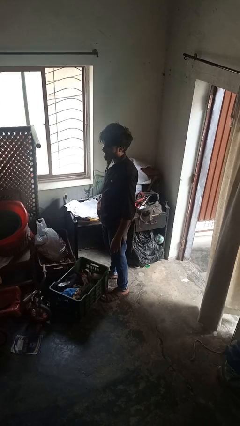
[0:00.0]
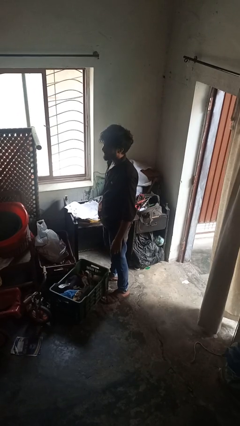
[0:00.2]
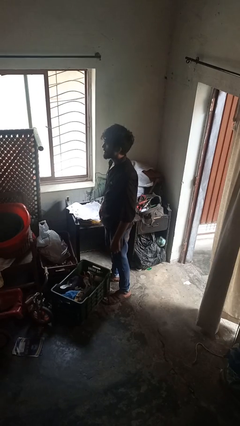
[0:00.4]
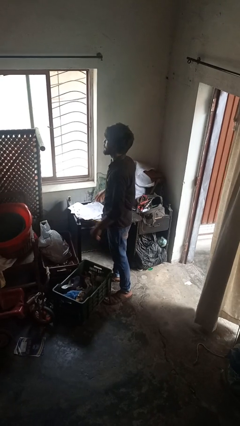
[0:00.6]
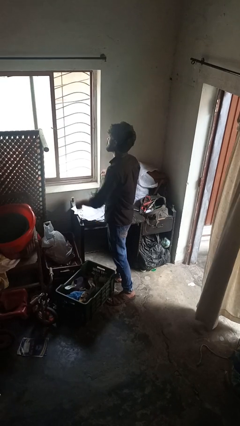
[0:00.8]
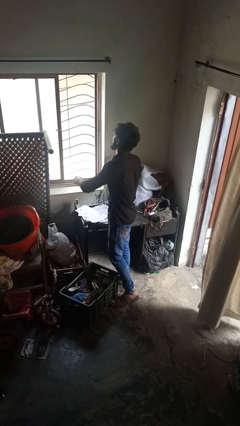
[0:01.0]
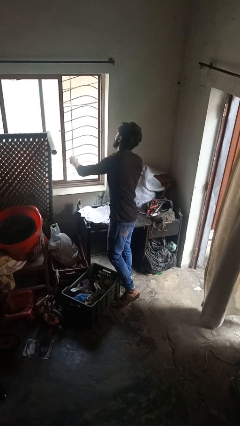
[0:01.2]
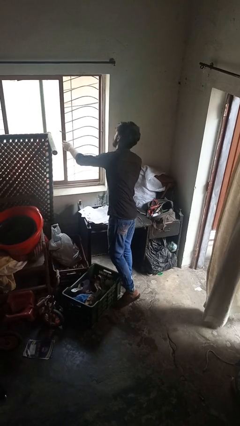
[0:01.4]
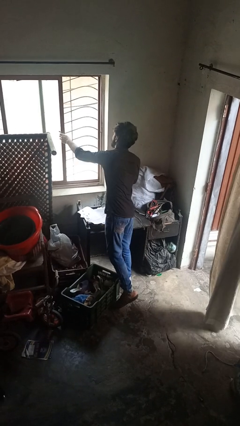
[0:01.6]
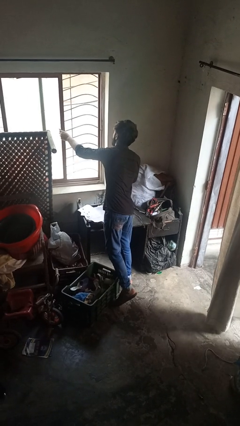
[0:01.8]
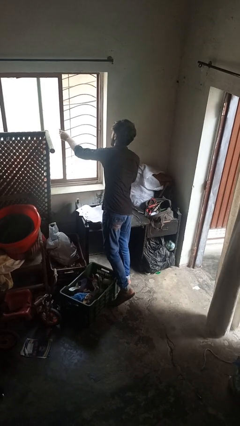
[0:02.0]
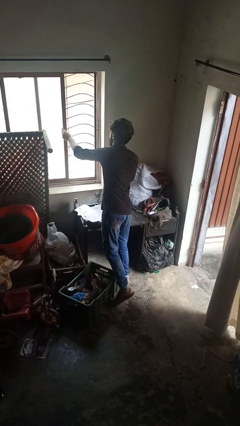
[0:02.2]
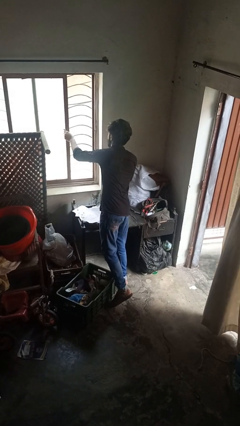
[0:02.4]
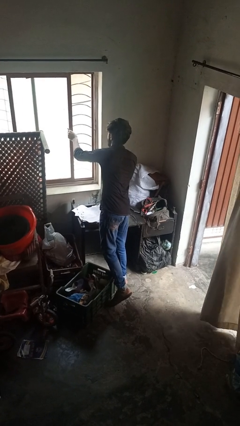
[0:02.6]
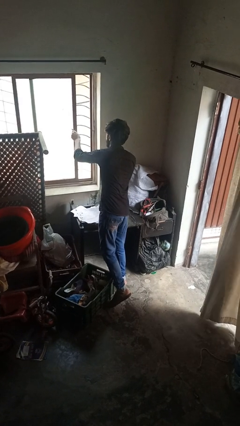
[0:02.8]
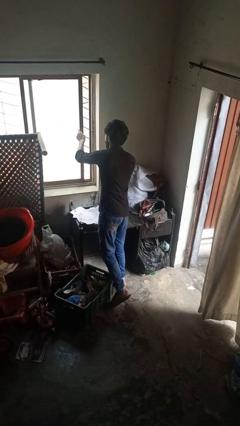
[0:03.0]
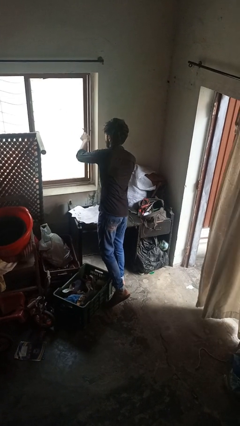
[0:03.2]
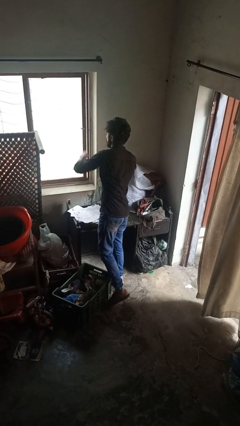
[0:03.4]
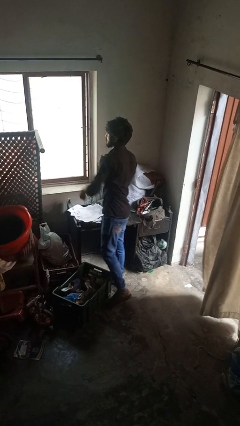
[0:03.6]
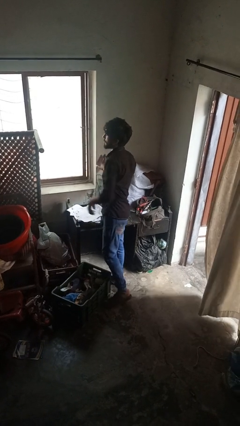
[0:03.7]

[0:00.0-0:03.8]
person closes home window

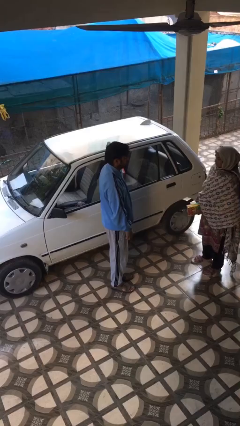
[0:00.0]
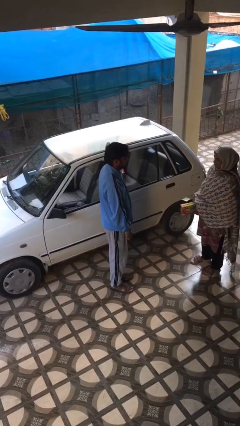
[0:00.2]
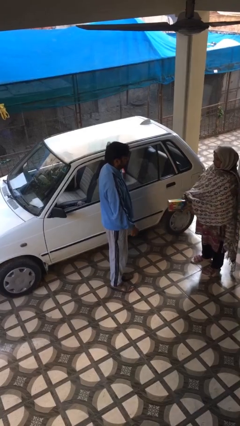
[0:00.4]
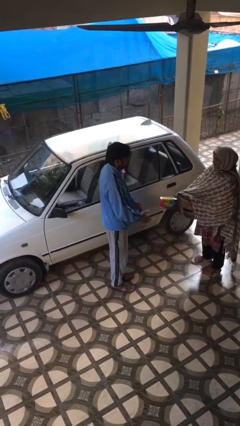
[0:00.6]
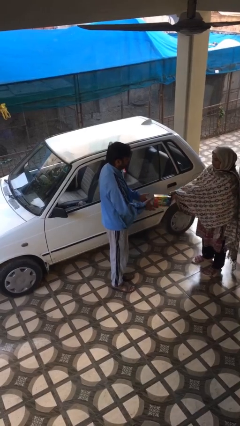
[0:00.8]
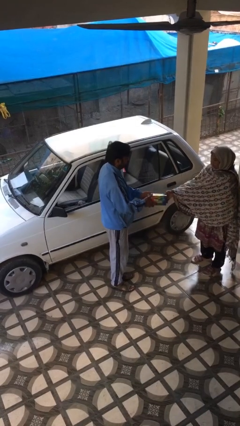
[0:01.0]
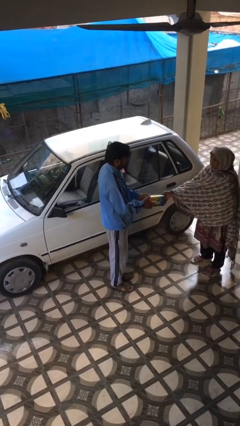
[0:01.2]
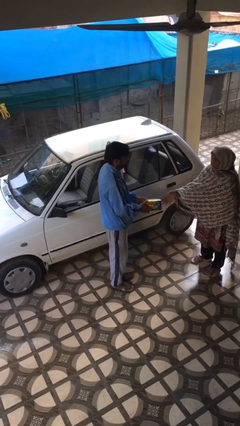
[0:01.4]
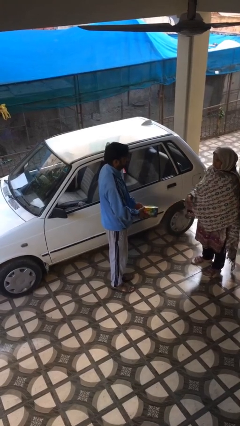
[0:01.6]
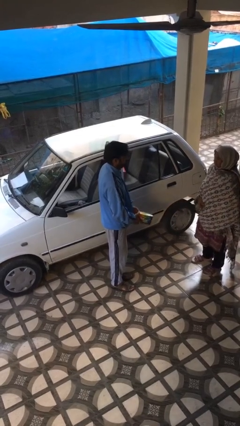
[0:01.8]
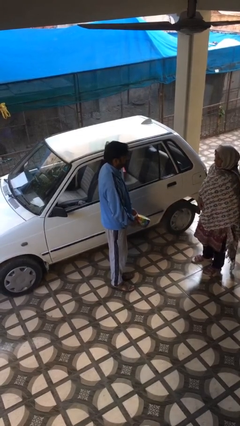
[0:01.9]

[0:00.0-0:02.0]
person transfers object to person

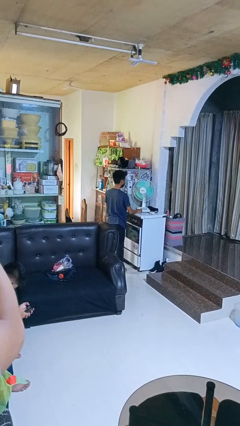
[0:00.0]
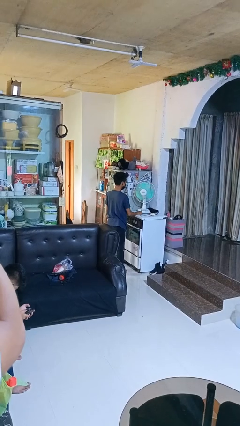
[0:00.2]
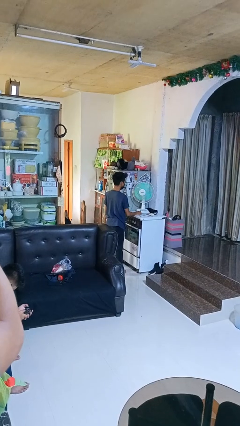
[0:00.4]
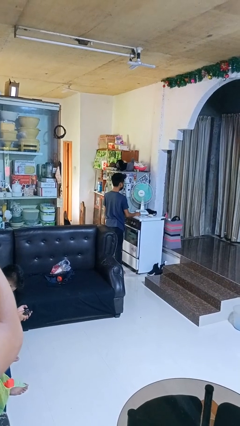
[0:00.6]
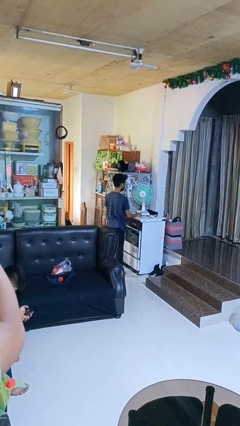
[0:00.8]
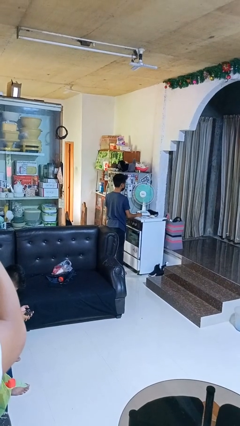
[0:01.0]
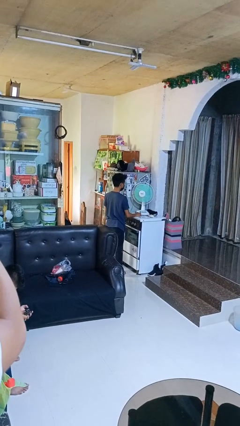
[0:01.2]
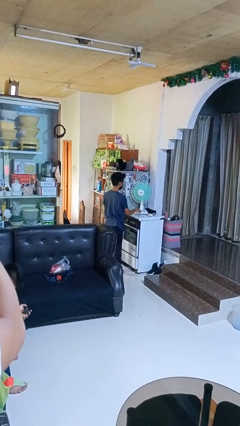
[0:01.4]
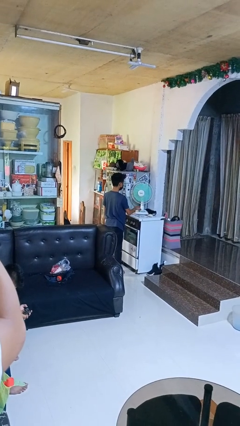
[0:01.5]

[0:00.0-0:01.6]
person turns on fan

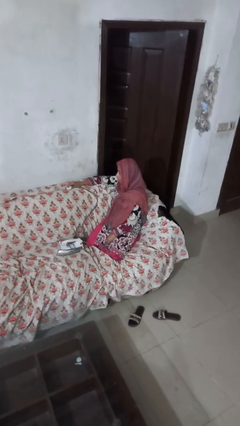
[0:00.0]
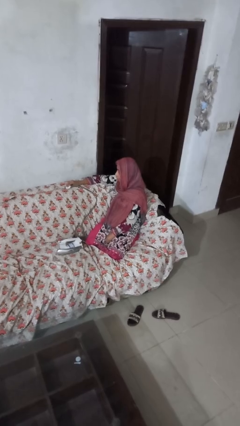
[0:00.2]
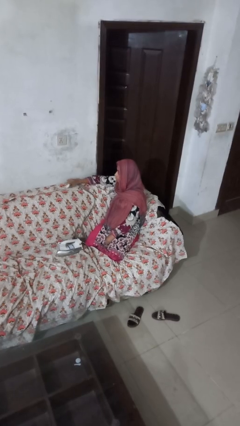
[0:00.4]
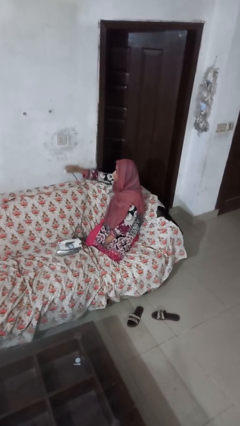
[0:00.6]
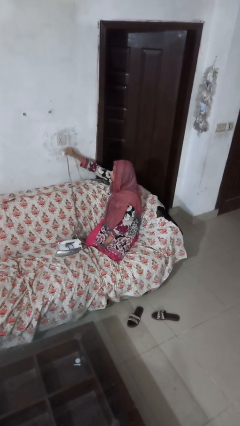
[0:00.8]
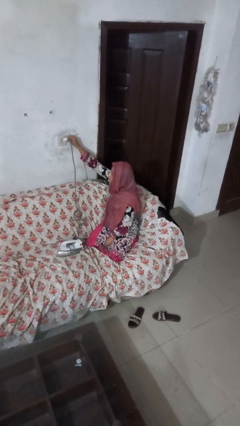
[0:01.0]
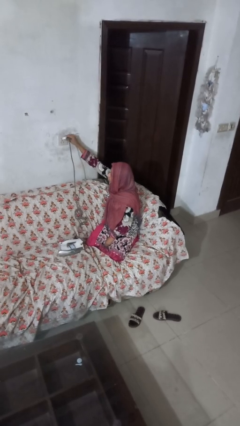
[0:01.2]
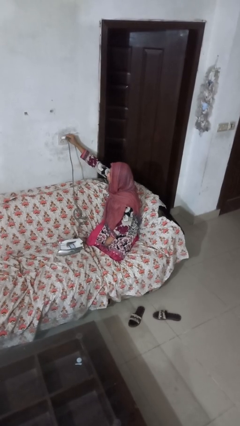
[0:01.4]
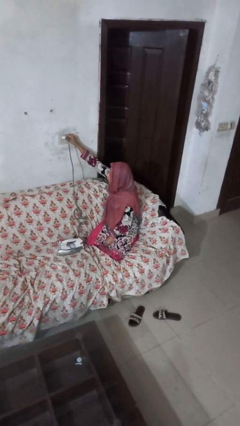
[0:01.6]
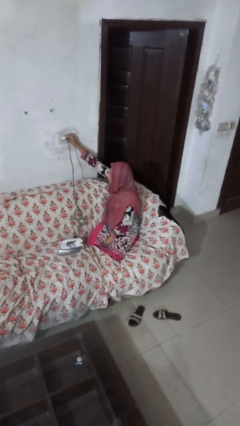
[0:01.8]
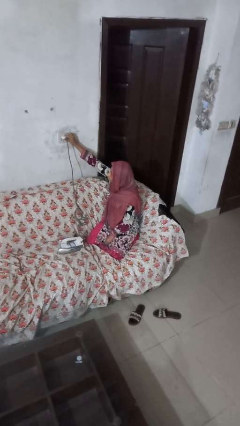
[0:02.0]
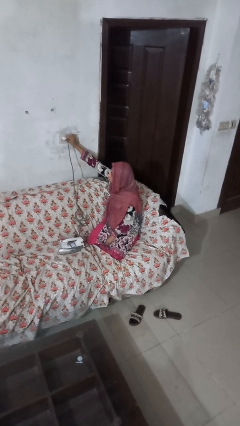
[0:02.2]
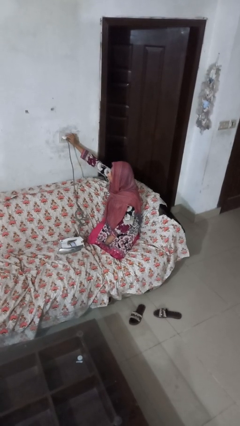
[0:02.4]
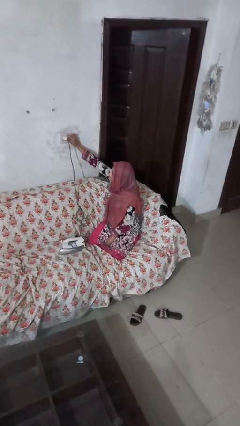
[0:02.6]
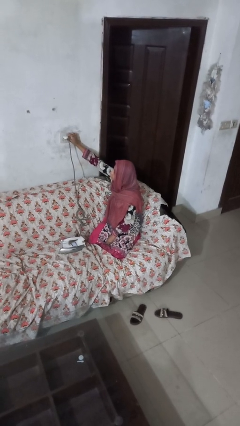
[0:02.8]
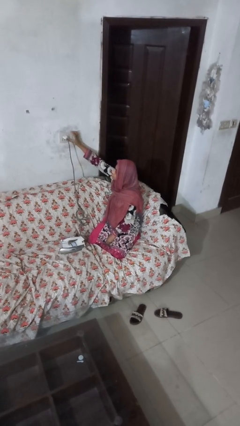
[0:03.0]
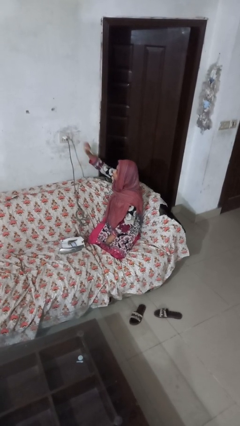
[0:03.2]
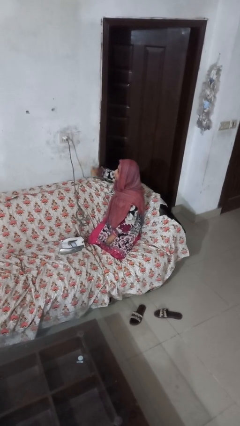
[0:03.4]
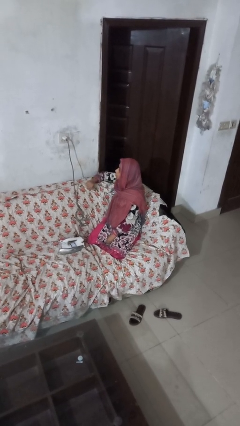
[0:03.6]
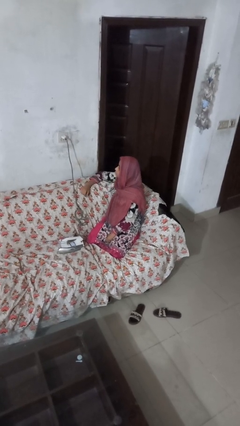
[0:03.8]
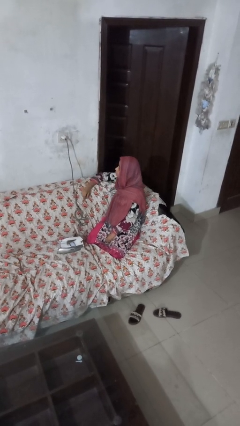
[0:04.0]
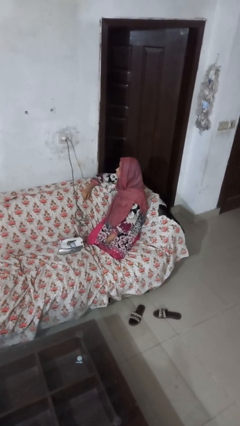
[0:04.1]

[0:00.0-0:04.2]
person plugs into electrical socket

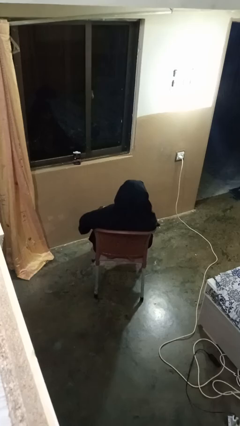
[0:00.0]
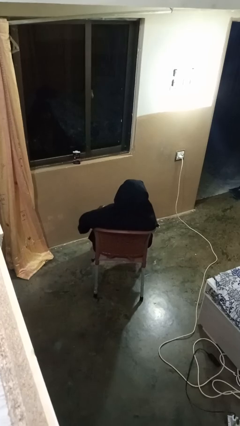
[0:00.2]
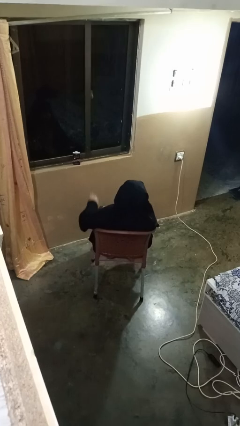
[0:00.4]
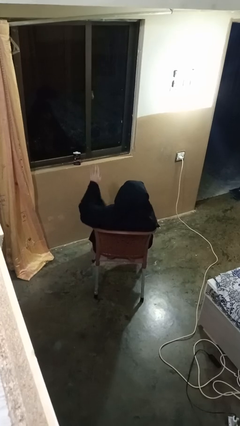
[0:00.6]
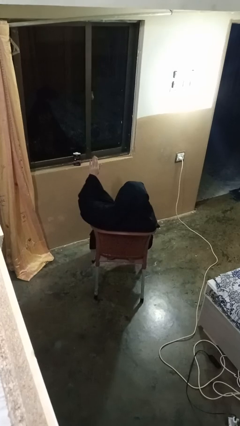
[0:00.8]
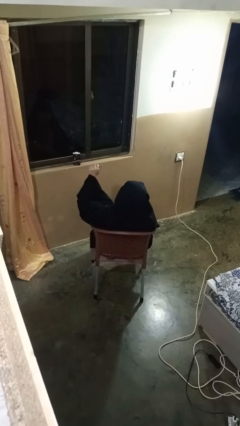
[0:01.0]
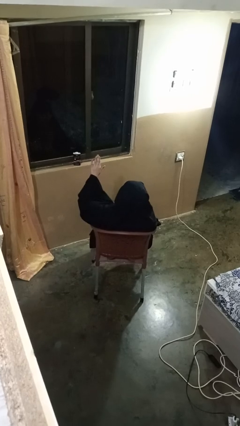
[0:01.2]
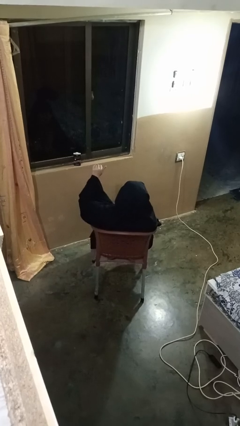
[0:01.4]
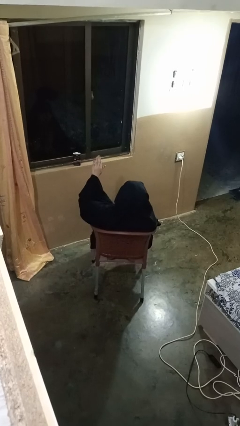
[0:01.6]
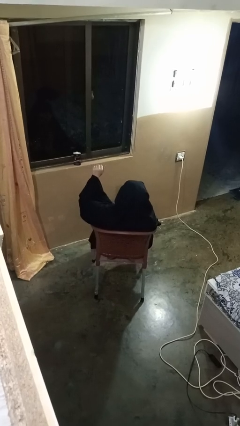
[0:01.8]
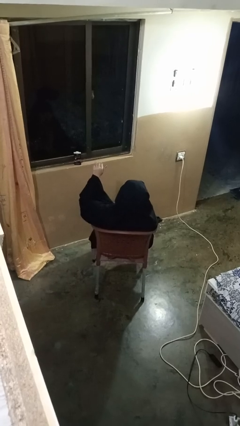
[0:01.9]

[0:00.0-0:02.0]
person gestures come here

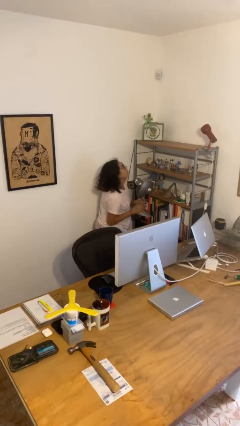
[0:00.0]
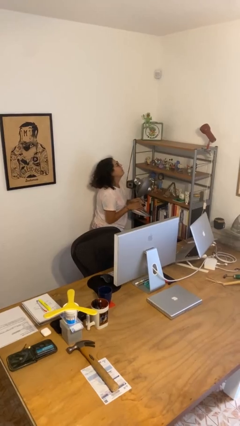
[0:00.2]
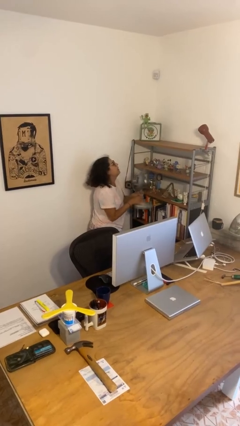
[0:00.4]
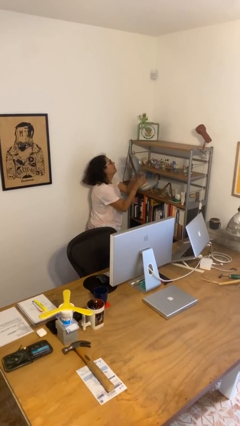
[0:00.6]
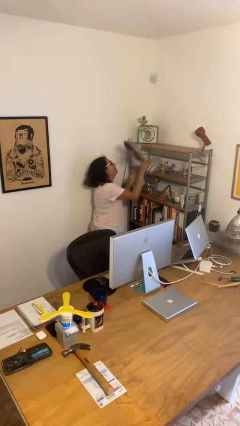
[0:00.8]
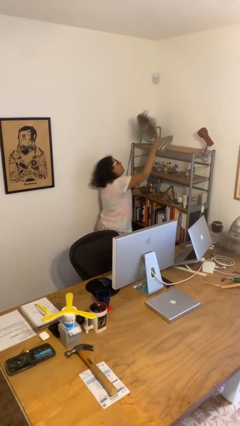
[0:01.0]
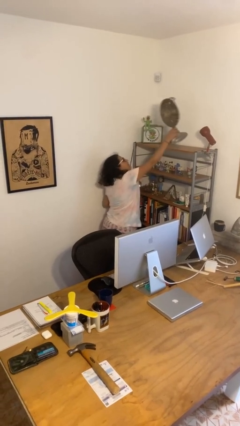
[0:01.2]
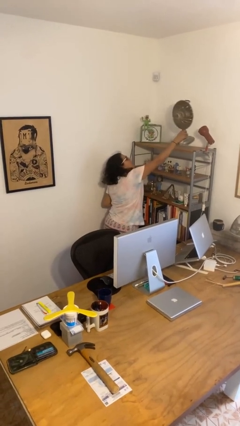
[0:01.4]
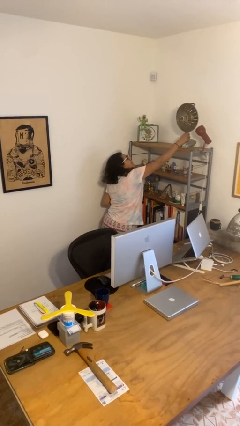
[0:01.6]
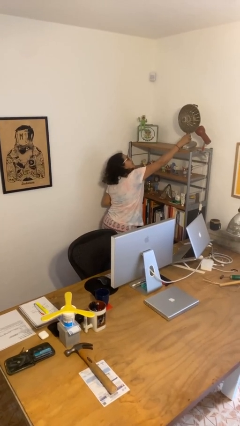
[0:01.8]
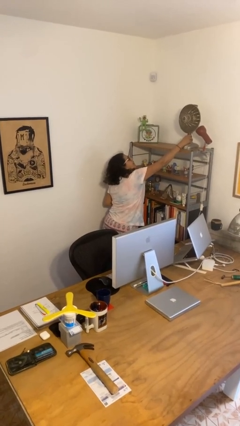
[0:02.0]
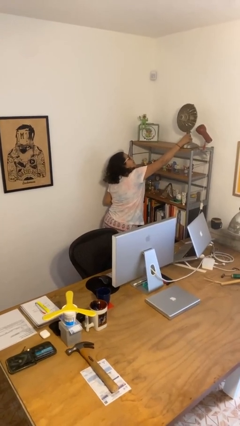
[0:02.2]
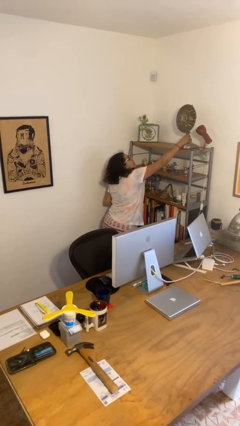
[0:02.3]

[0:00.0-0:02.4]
person puts down object on shelf

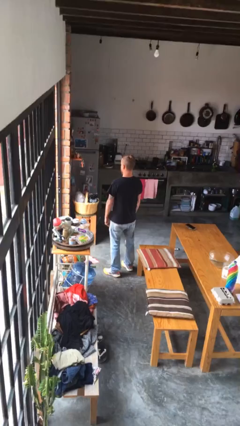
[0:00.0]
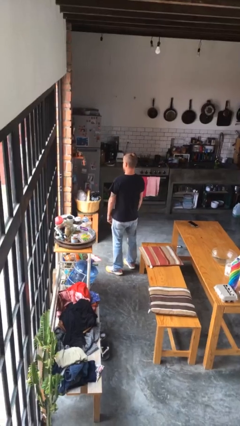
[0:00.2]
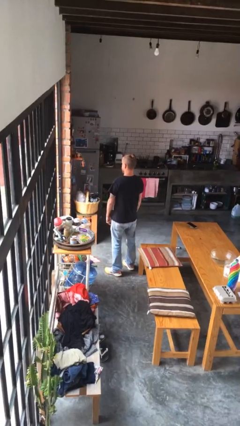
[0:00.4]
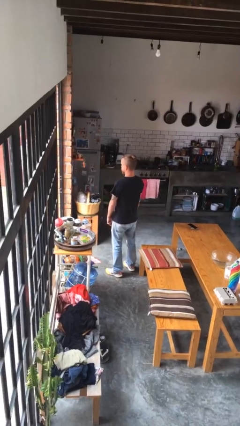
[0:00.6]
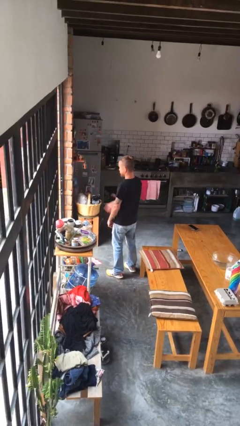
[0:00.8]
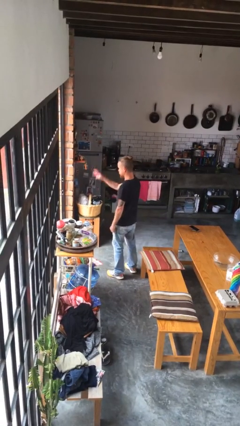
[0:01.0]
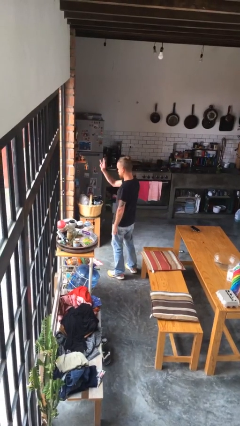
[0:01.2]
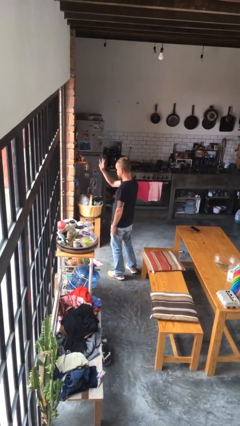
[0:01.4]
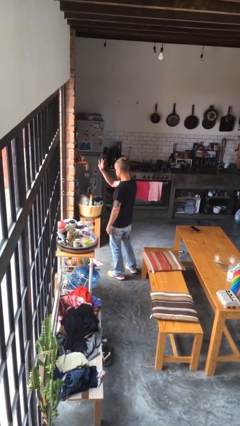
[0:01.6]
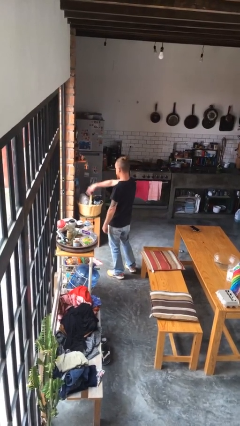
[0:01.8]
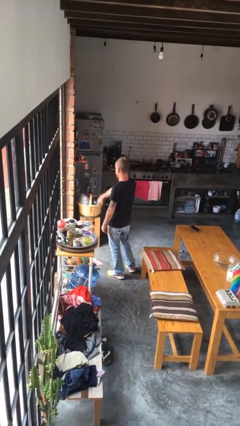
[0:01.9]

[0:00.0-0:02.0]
person gestures number three
